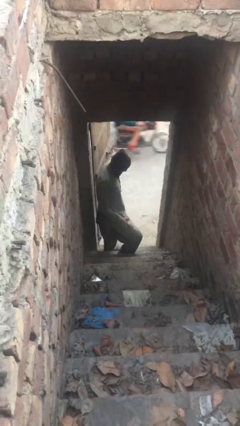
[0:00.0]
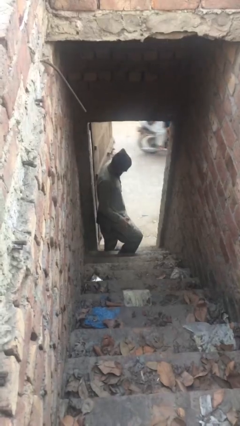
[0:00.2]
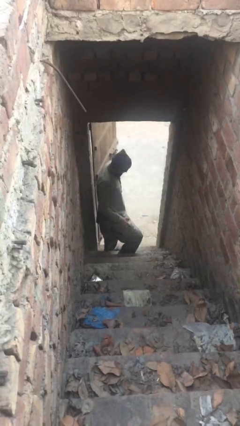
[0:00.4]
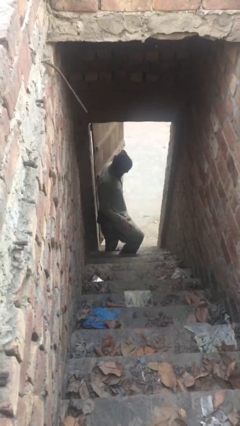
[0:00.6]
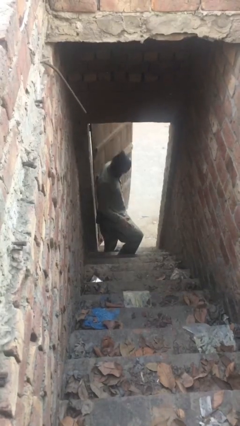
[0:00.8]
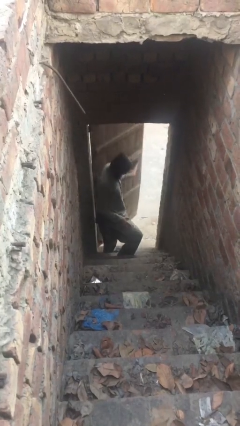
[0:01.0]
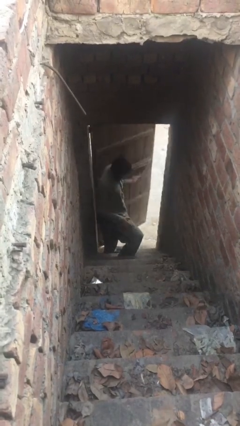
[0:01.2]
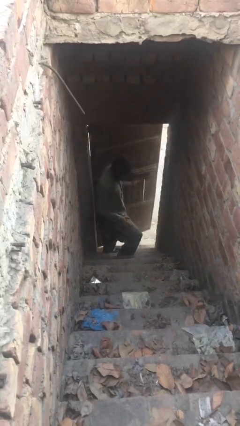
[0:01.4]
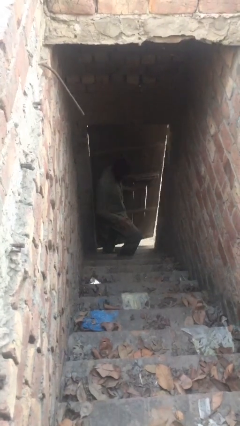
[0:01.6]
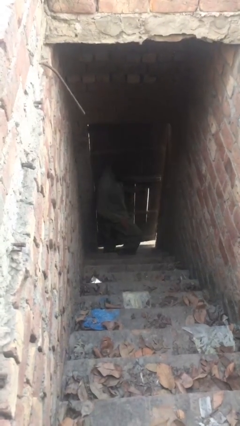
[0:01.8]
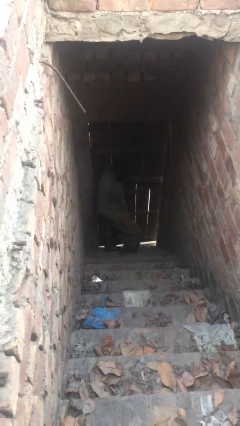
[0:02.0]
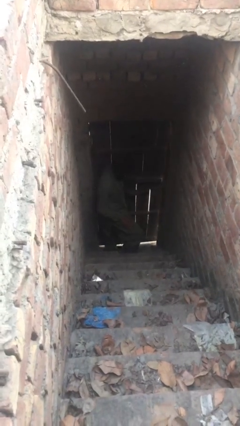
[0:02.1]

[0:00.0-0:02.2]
person closes facility door

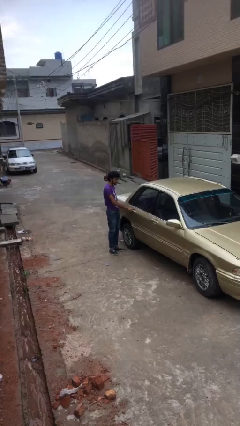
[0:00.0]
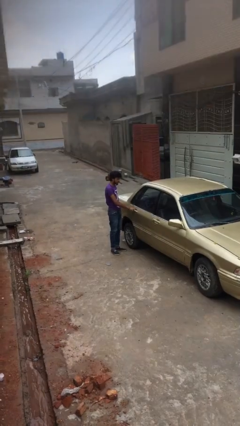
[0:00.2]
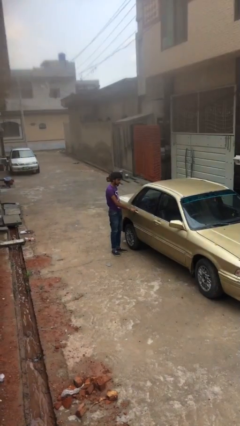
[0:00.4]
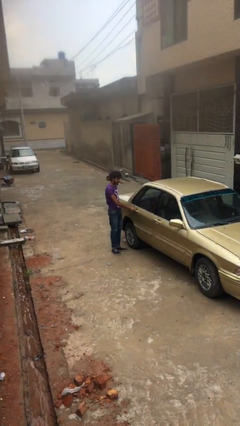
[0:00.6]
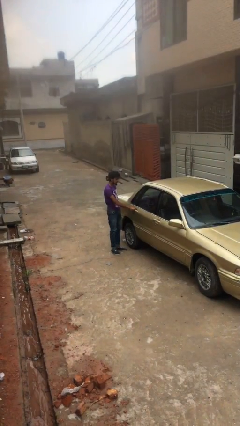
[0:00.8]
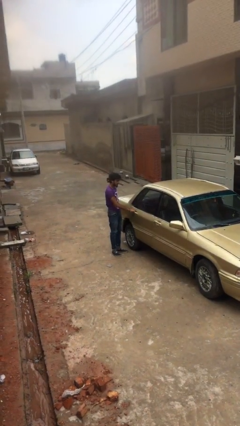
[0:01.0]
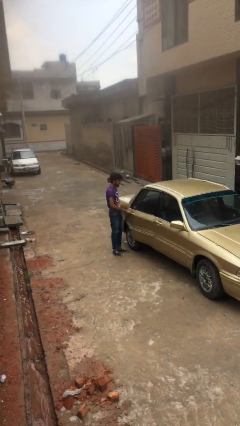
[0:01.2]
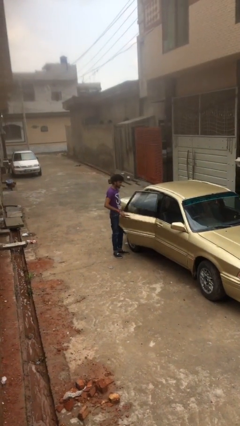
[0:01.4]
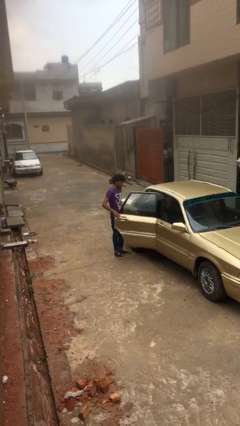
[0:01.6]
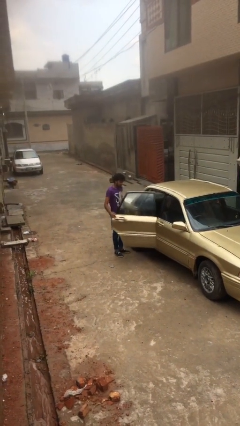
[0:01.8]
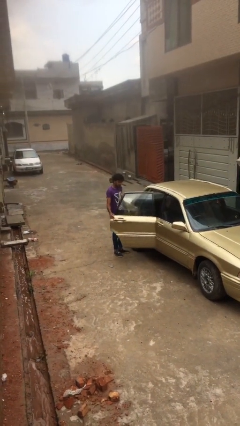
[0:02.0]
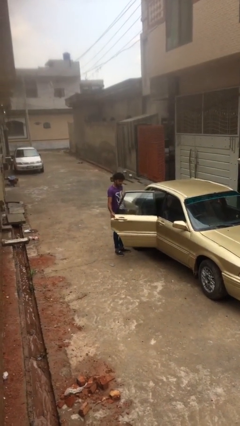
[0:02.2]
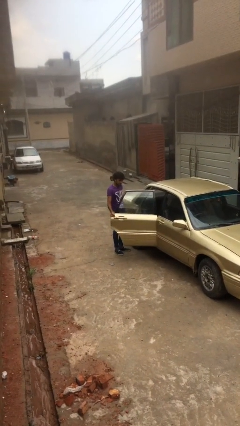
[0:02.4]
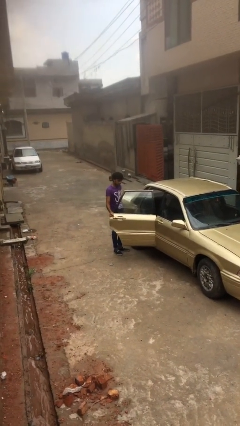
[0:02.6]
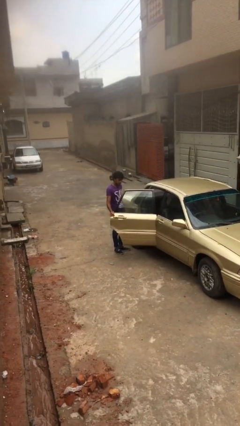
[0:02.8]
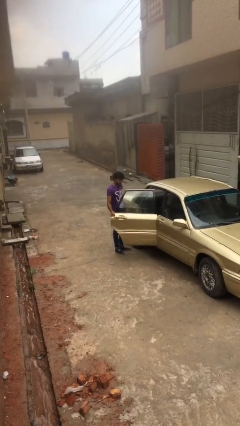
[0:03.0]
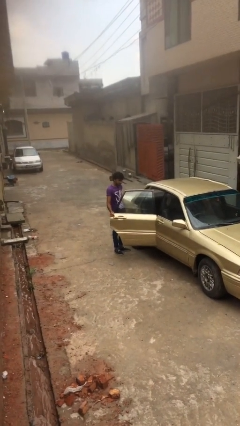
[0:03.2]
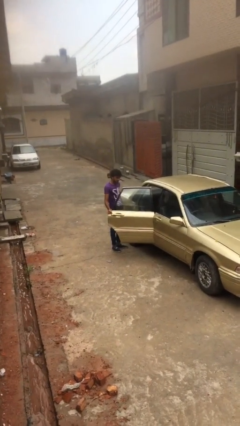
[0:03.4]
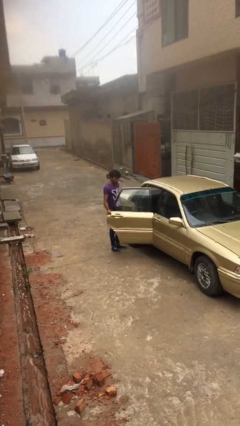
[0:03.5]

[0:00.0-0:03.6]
person opens car door

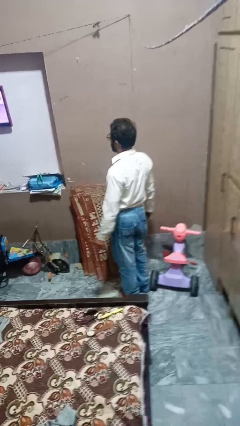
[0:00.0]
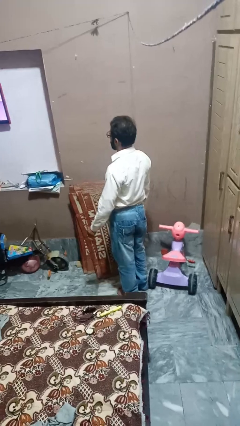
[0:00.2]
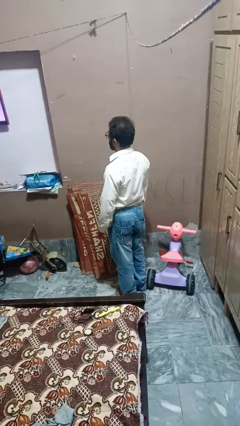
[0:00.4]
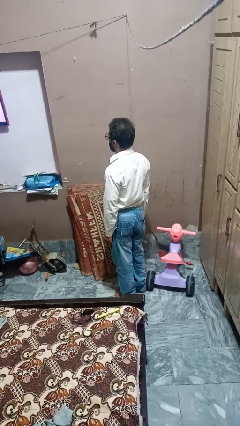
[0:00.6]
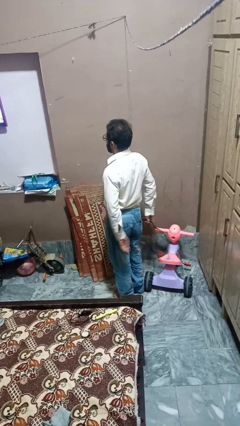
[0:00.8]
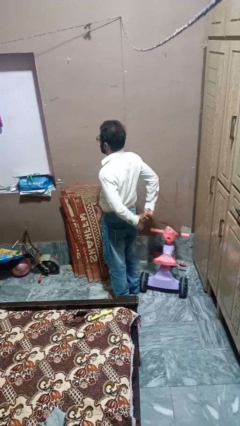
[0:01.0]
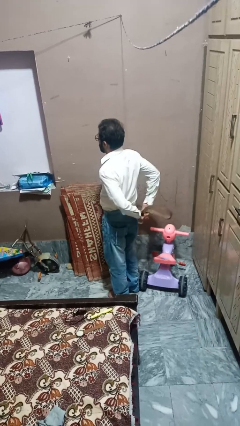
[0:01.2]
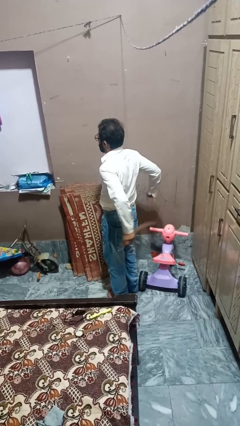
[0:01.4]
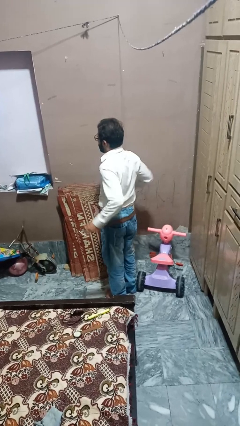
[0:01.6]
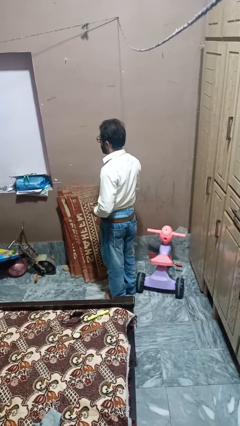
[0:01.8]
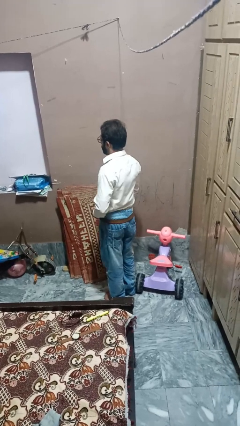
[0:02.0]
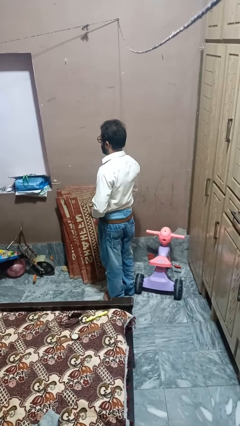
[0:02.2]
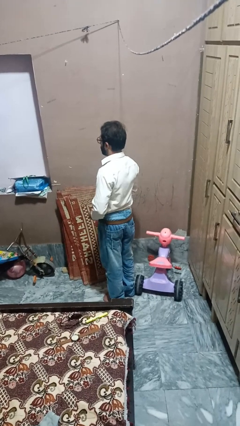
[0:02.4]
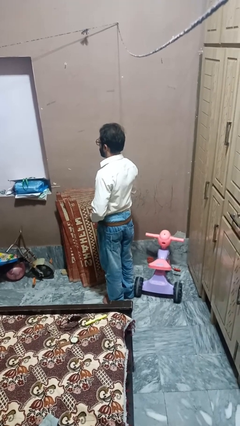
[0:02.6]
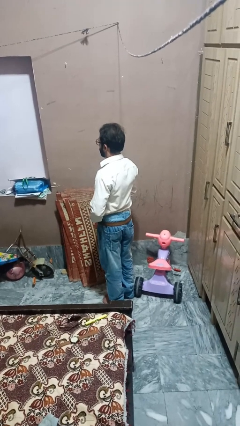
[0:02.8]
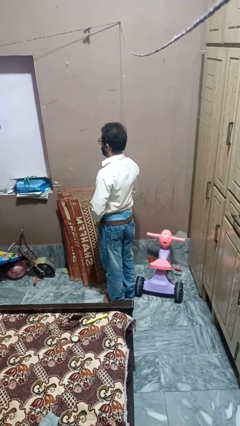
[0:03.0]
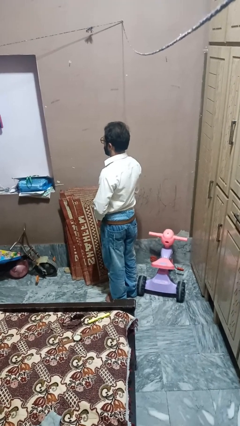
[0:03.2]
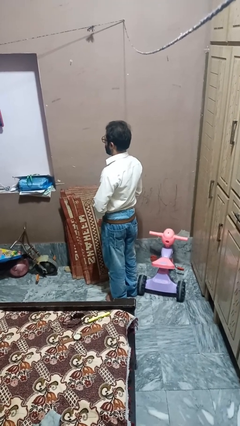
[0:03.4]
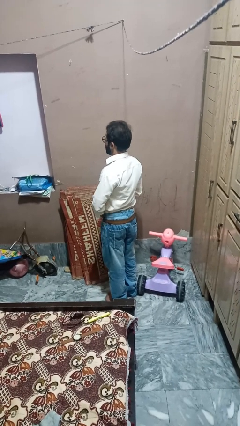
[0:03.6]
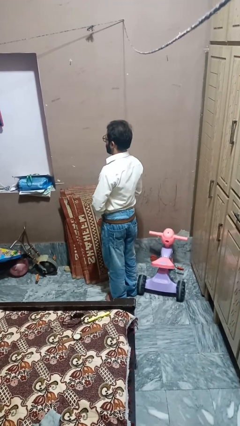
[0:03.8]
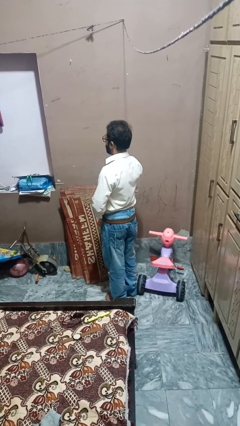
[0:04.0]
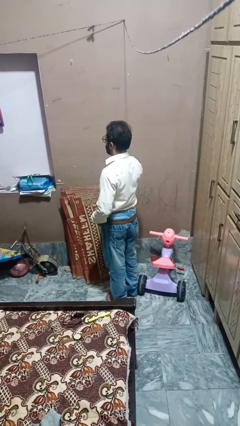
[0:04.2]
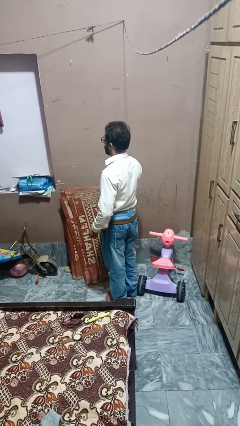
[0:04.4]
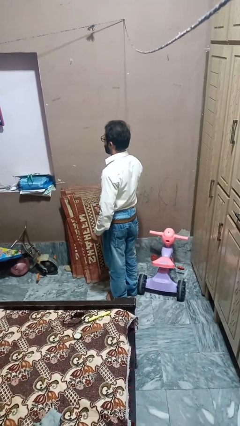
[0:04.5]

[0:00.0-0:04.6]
person puts on belt

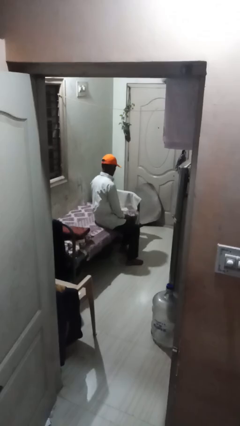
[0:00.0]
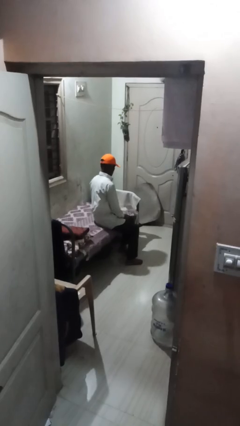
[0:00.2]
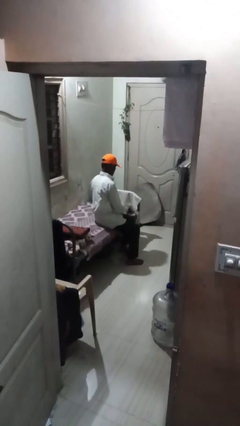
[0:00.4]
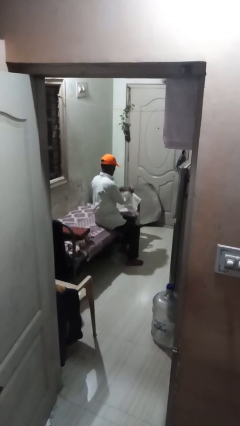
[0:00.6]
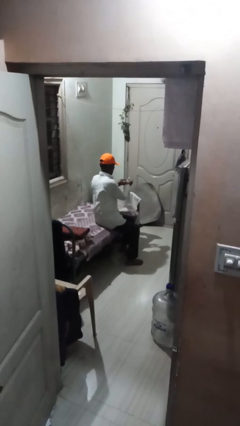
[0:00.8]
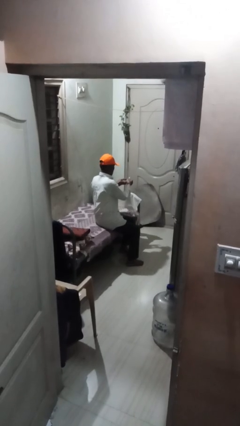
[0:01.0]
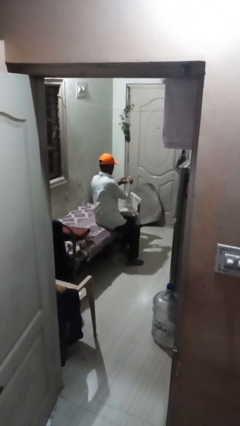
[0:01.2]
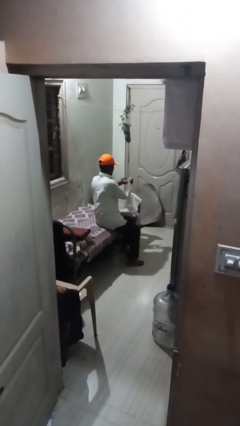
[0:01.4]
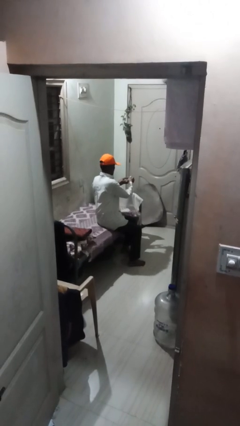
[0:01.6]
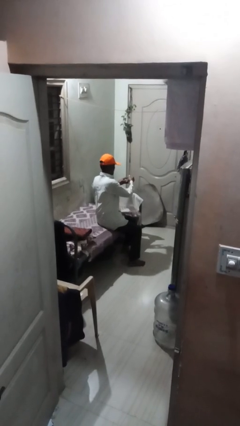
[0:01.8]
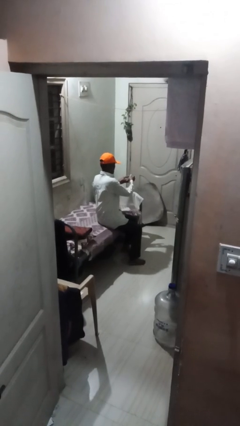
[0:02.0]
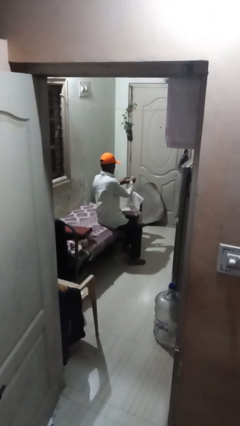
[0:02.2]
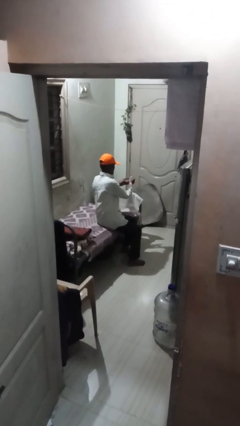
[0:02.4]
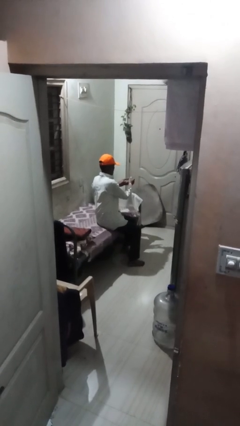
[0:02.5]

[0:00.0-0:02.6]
person clips fingernails

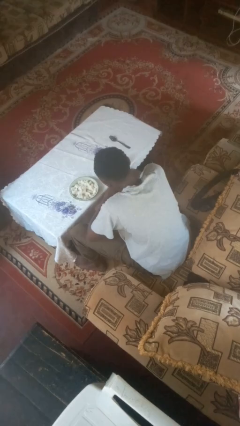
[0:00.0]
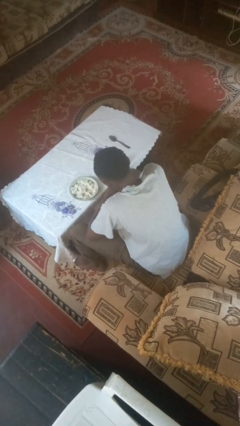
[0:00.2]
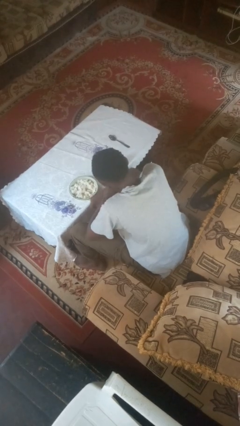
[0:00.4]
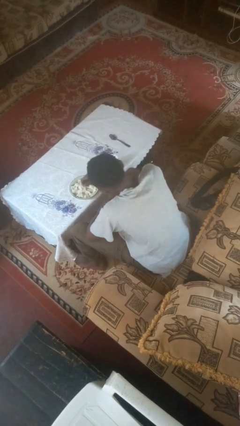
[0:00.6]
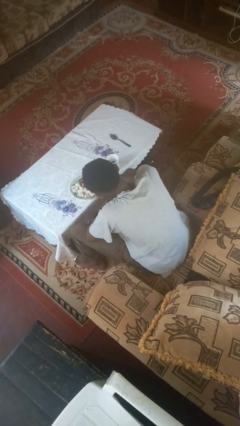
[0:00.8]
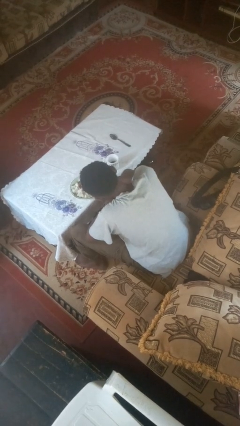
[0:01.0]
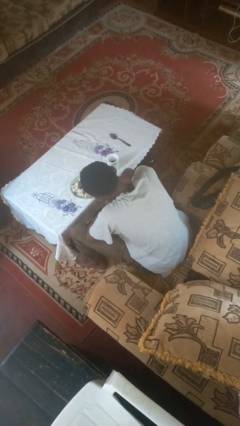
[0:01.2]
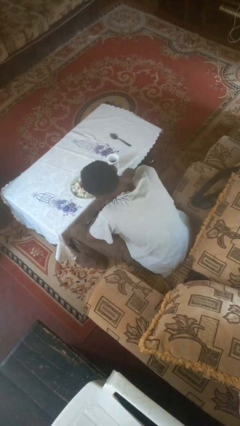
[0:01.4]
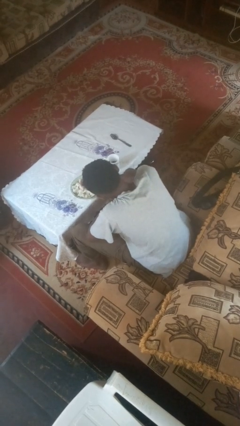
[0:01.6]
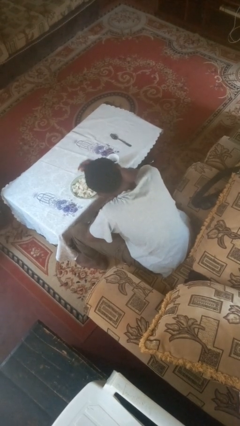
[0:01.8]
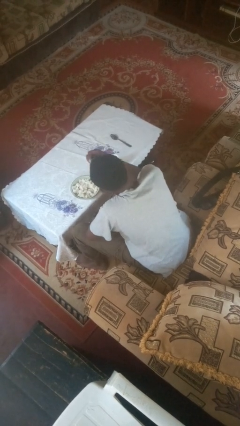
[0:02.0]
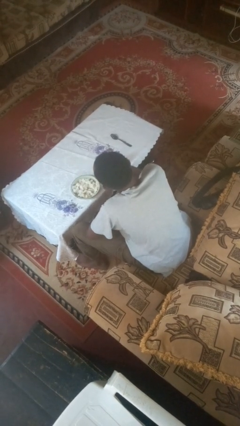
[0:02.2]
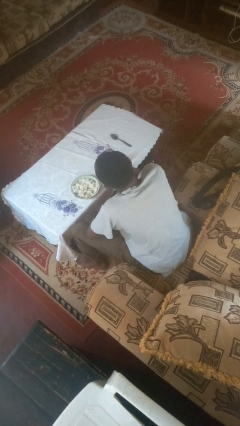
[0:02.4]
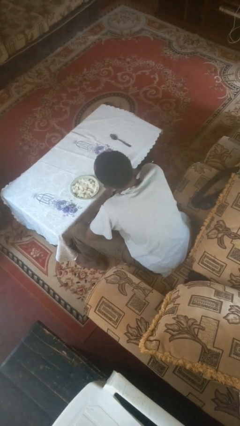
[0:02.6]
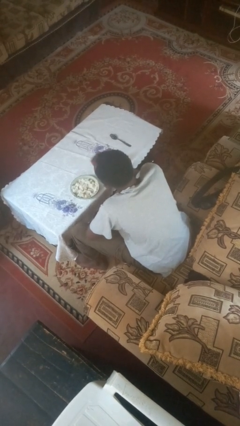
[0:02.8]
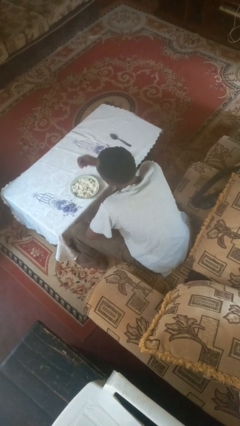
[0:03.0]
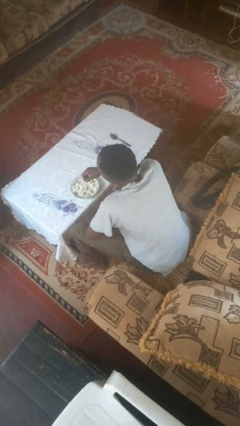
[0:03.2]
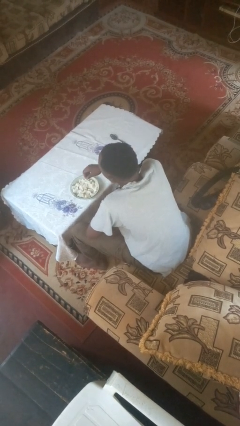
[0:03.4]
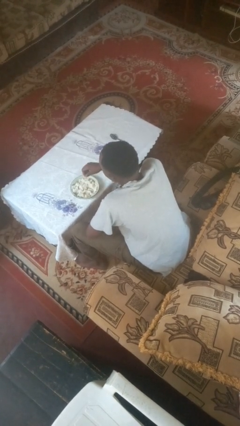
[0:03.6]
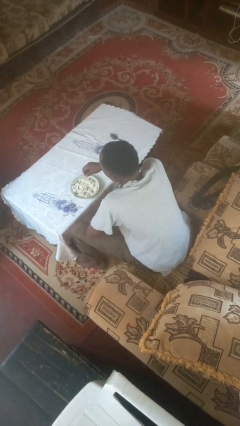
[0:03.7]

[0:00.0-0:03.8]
person eats with hands

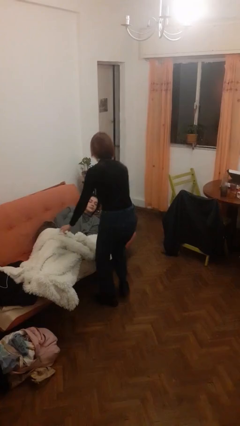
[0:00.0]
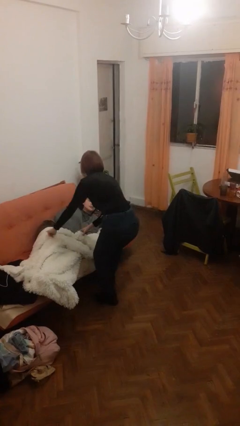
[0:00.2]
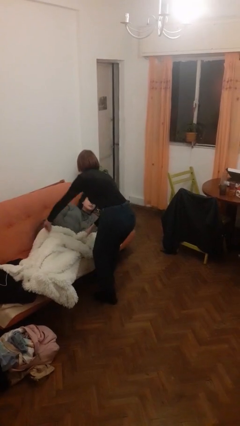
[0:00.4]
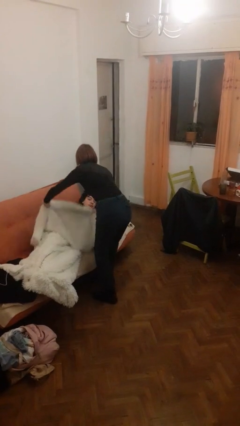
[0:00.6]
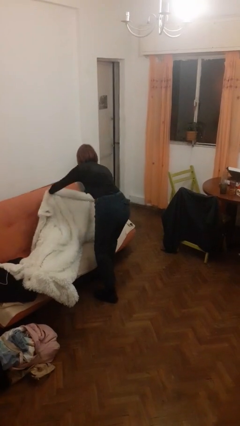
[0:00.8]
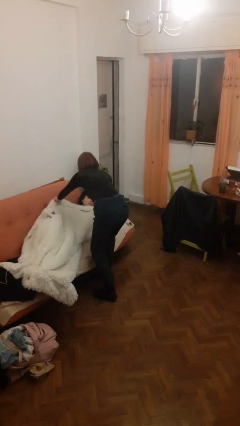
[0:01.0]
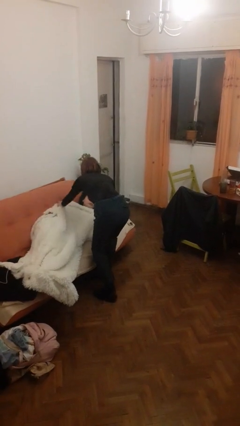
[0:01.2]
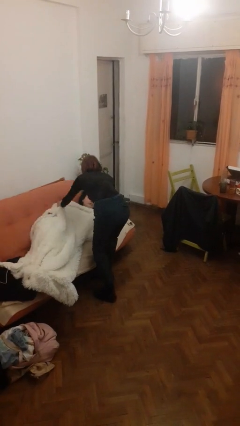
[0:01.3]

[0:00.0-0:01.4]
person covers friend with blanket
